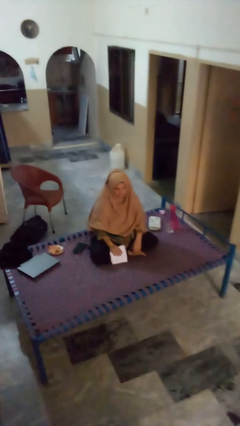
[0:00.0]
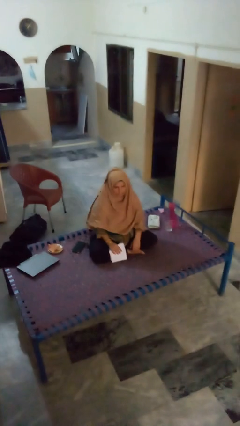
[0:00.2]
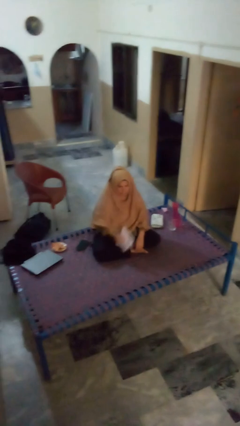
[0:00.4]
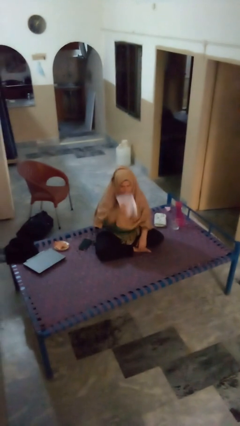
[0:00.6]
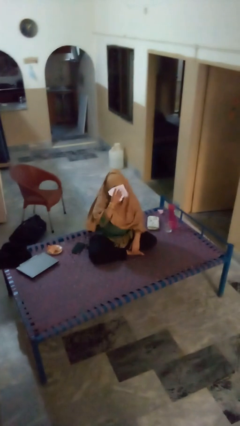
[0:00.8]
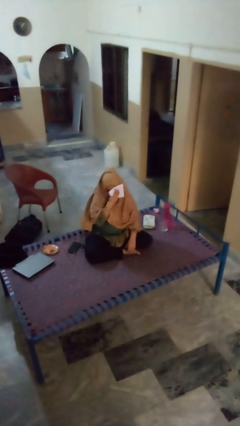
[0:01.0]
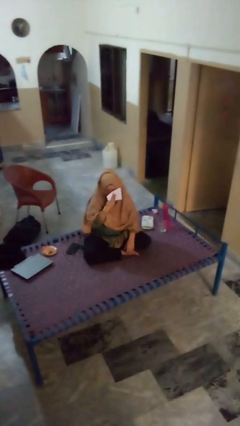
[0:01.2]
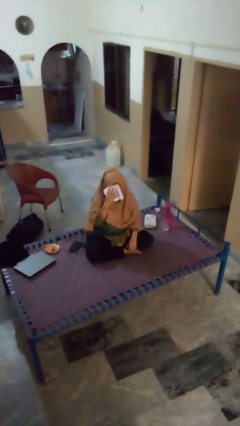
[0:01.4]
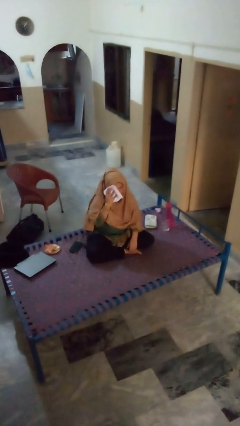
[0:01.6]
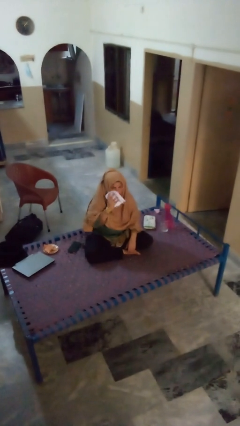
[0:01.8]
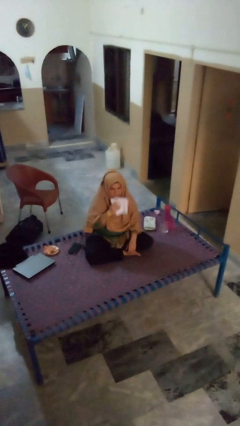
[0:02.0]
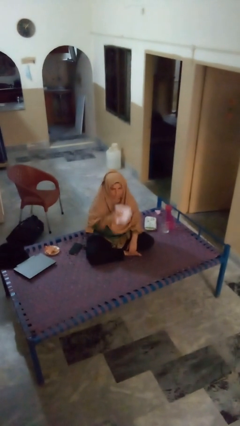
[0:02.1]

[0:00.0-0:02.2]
person wipes mouth with napkin

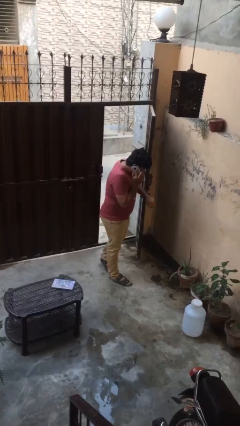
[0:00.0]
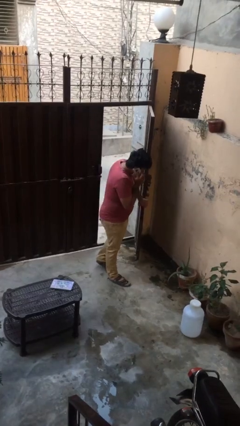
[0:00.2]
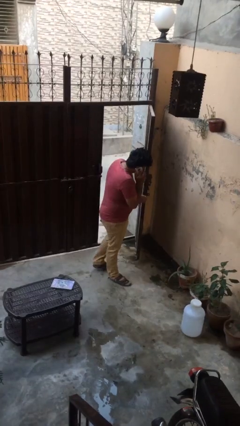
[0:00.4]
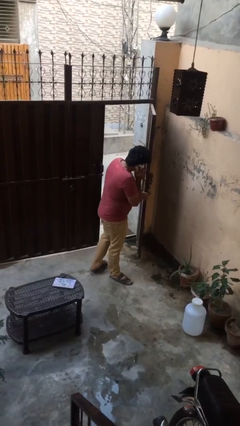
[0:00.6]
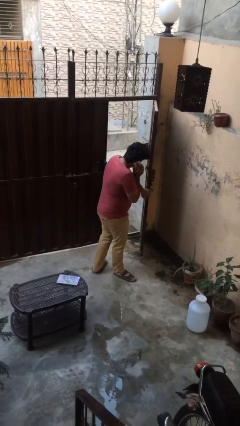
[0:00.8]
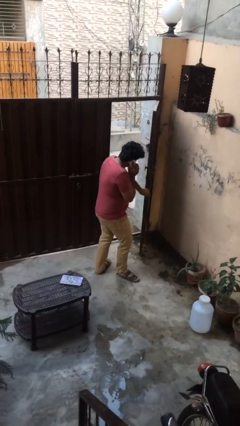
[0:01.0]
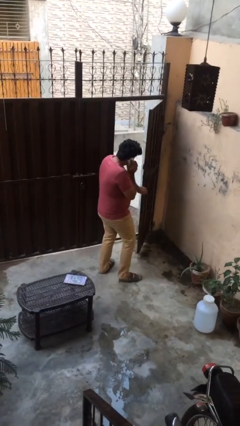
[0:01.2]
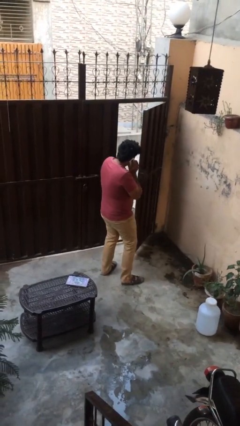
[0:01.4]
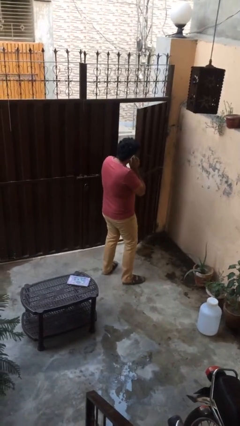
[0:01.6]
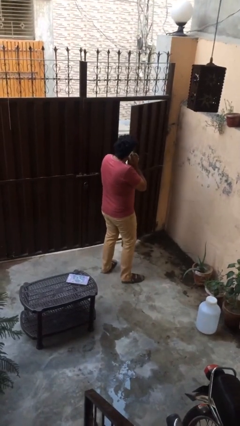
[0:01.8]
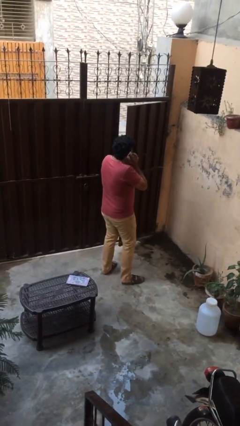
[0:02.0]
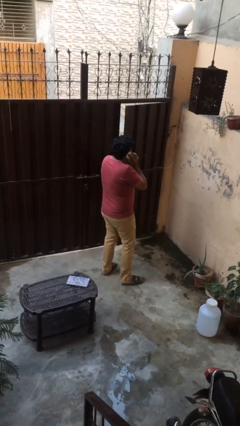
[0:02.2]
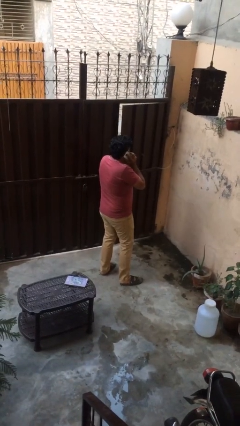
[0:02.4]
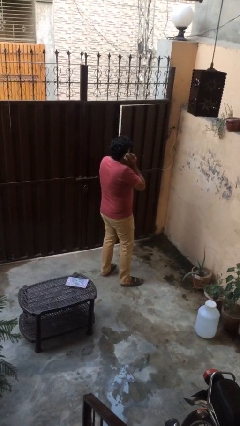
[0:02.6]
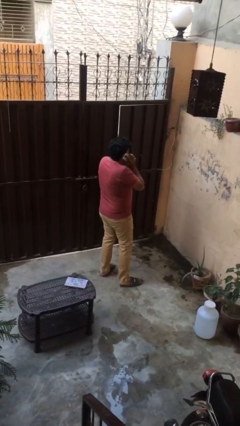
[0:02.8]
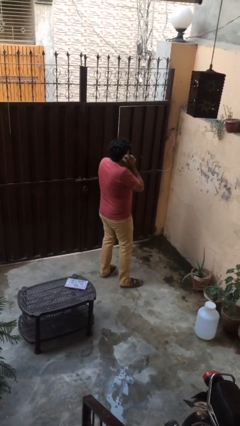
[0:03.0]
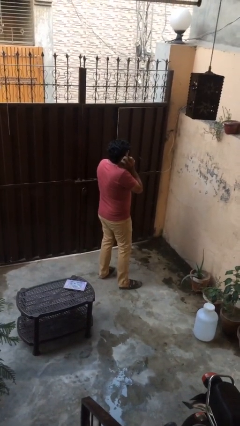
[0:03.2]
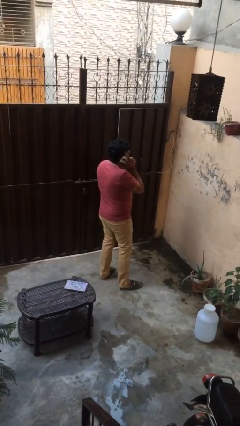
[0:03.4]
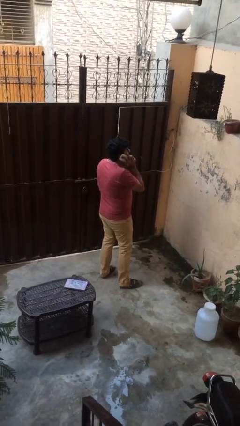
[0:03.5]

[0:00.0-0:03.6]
person closes facility door

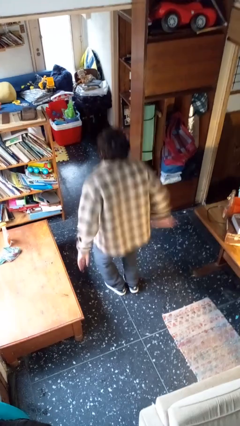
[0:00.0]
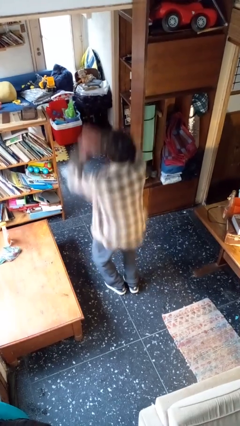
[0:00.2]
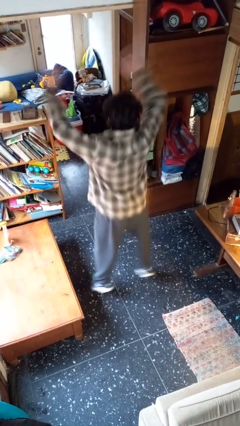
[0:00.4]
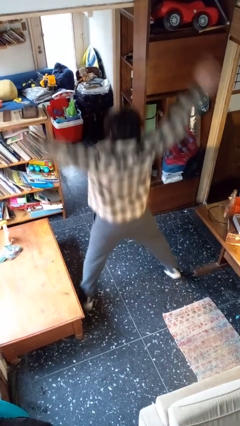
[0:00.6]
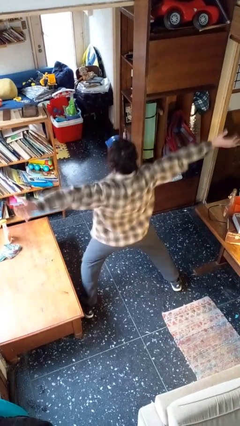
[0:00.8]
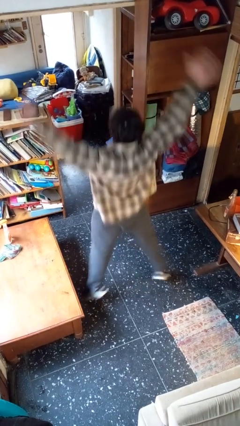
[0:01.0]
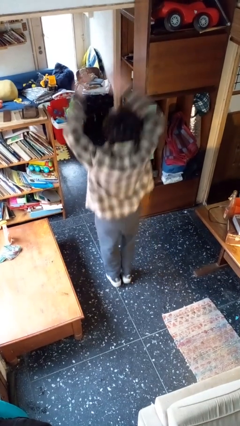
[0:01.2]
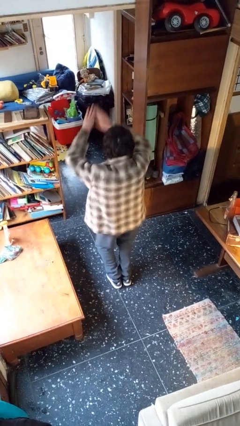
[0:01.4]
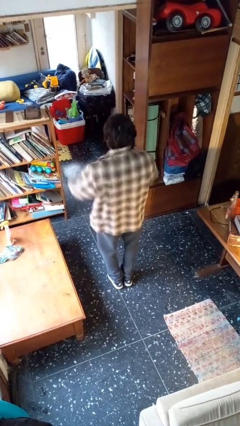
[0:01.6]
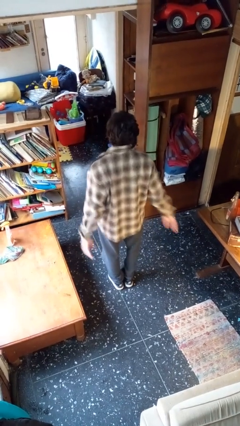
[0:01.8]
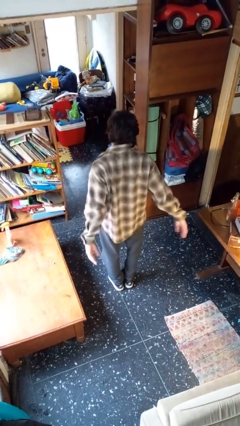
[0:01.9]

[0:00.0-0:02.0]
person exercises with jumping jacks

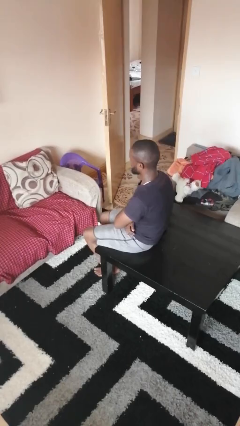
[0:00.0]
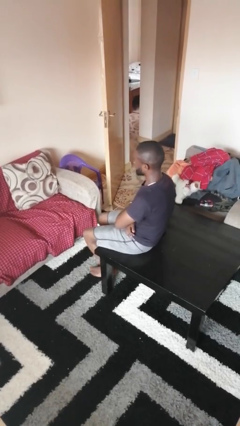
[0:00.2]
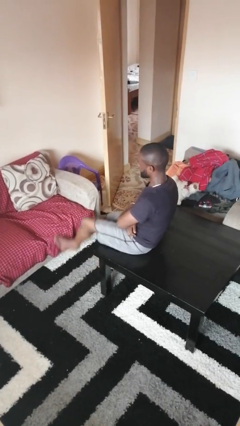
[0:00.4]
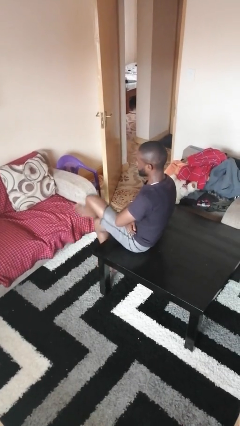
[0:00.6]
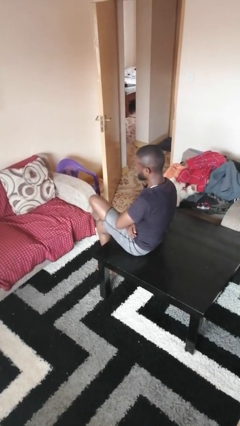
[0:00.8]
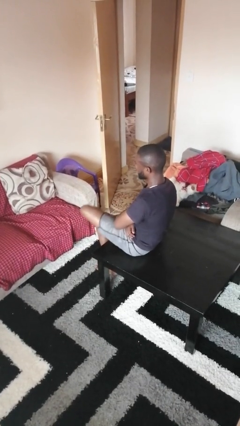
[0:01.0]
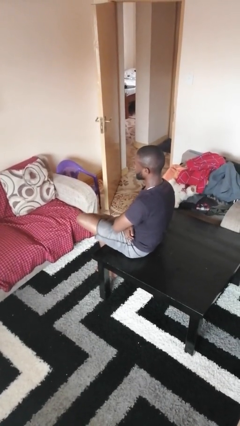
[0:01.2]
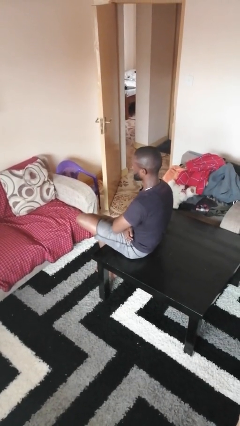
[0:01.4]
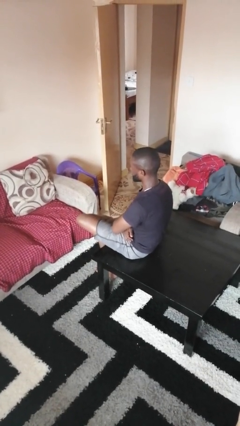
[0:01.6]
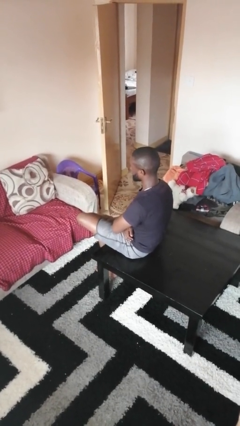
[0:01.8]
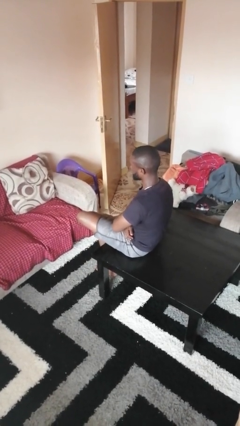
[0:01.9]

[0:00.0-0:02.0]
person crosses legs

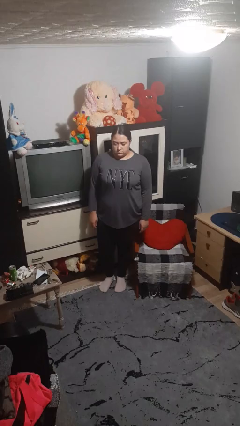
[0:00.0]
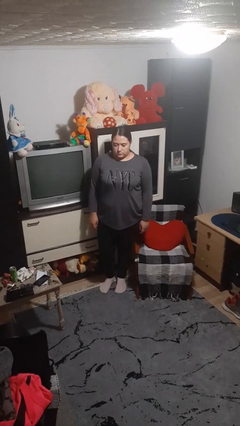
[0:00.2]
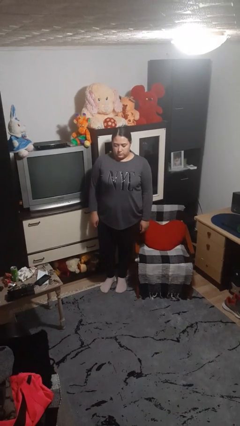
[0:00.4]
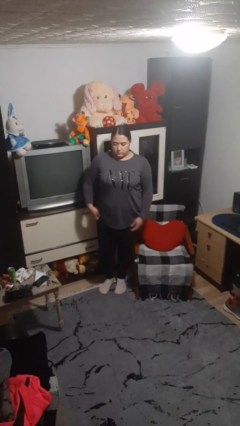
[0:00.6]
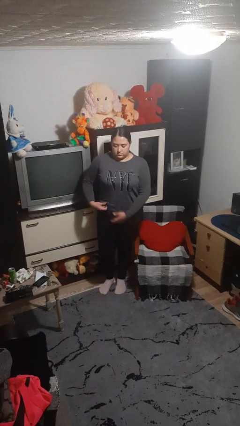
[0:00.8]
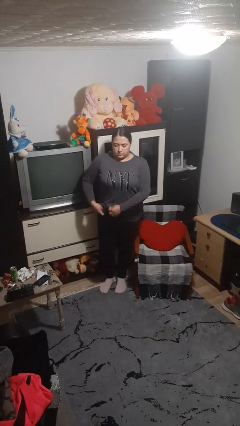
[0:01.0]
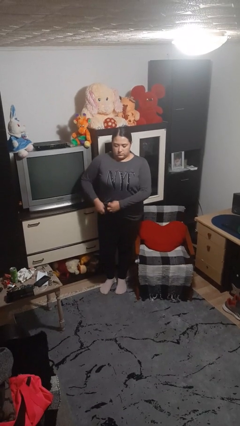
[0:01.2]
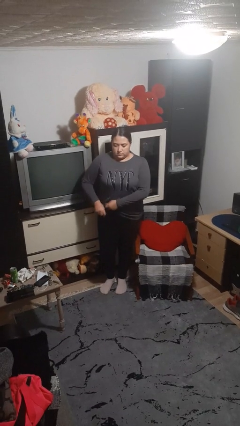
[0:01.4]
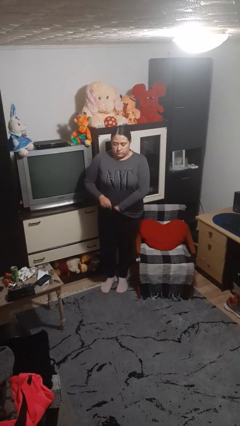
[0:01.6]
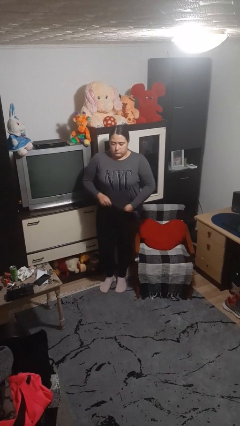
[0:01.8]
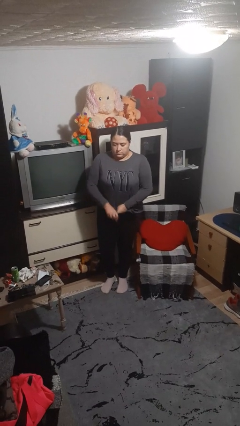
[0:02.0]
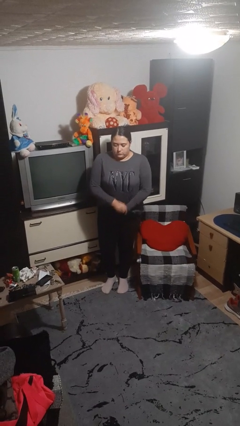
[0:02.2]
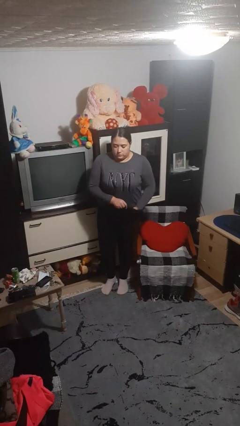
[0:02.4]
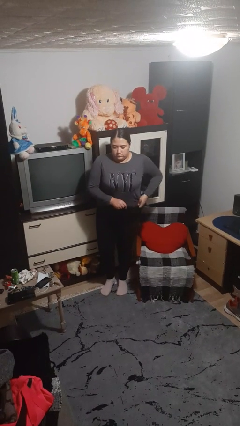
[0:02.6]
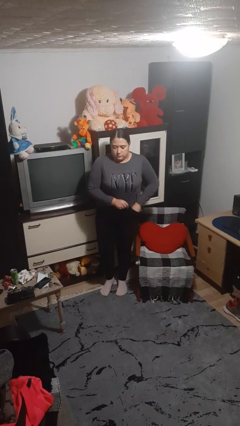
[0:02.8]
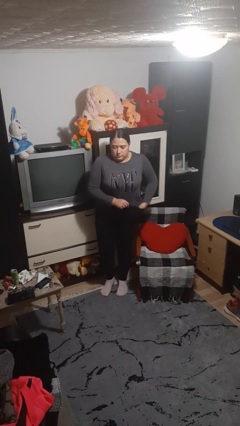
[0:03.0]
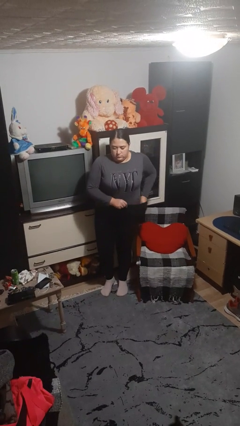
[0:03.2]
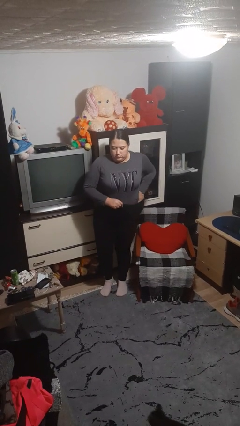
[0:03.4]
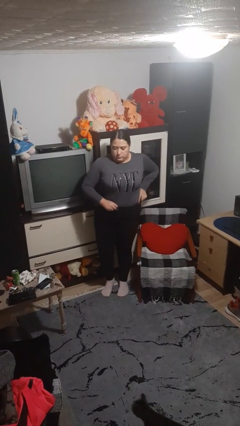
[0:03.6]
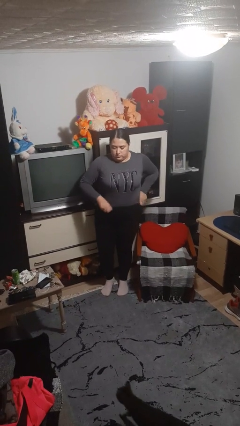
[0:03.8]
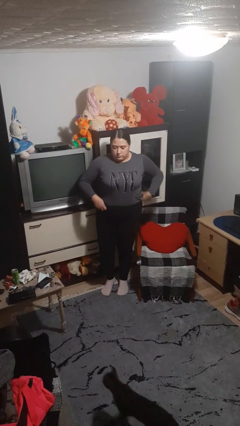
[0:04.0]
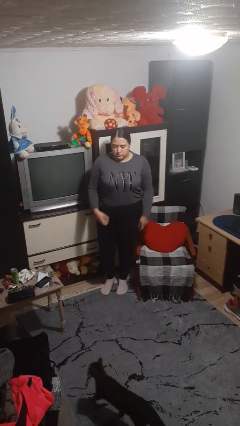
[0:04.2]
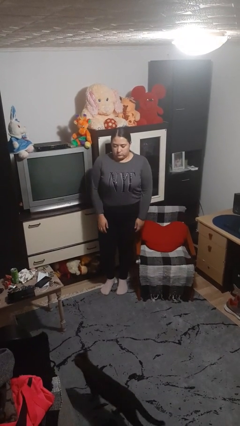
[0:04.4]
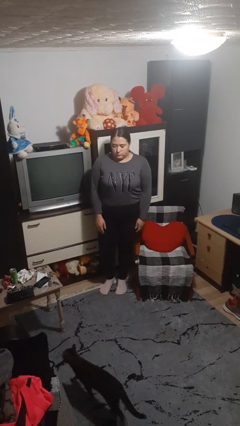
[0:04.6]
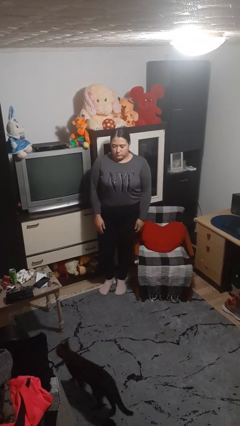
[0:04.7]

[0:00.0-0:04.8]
person tucks in shirt

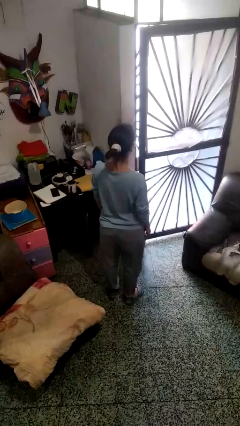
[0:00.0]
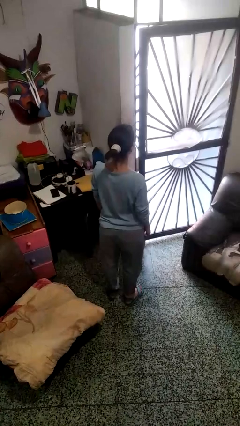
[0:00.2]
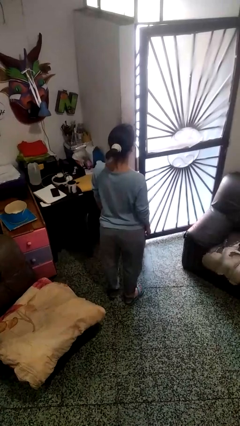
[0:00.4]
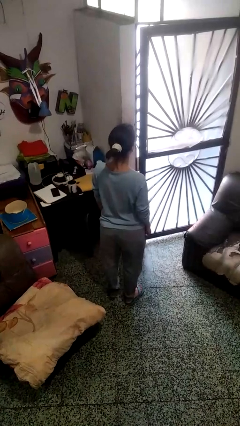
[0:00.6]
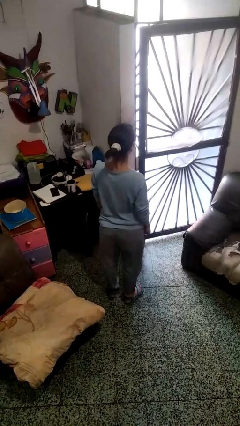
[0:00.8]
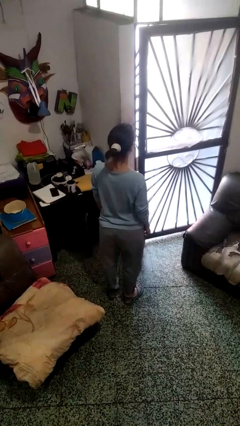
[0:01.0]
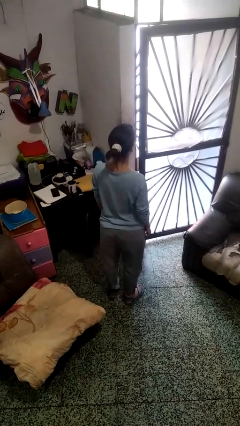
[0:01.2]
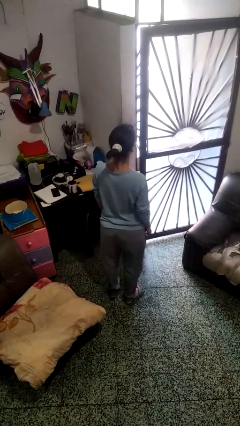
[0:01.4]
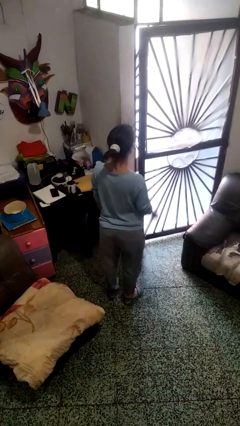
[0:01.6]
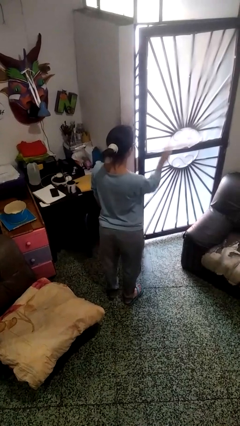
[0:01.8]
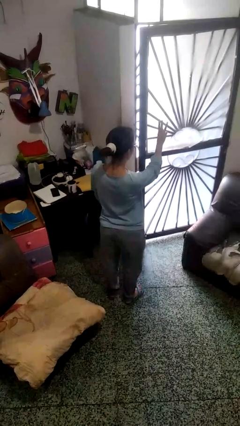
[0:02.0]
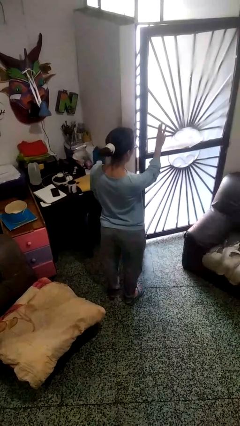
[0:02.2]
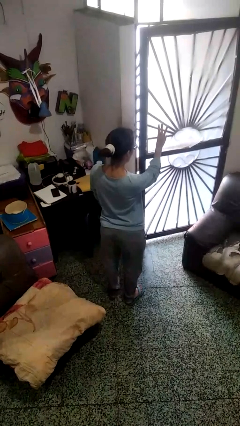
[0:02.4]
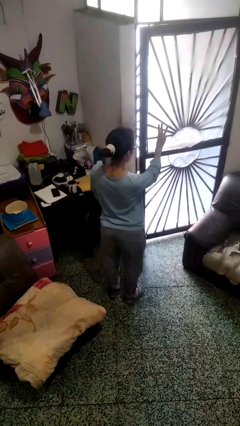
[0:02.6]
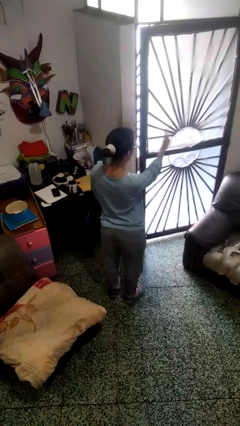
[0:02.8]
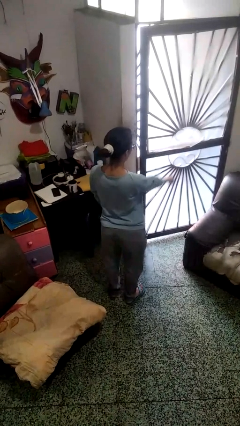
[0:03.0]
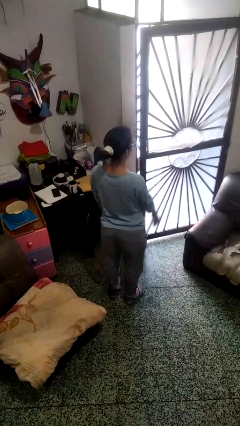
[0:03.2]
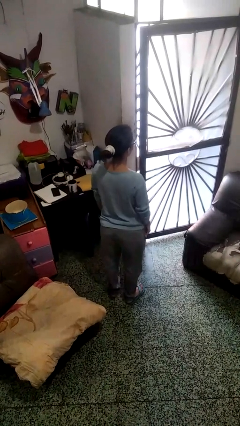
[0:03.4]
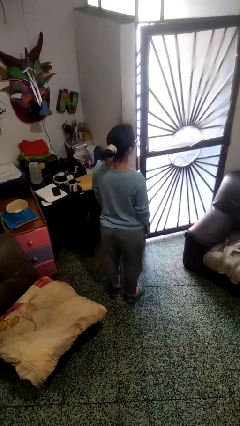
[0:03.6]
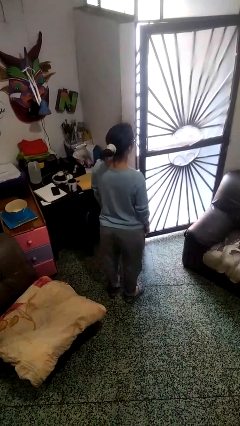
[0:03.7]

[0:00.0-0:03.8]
person gestures number three
